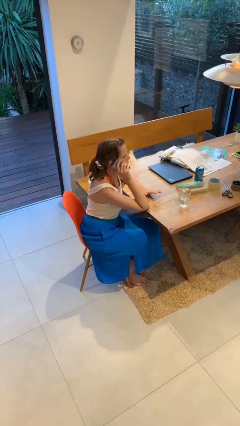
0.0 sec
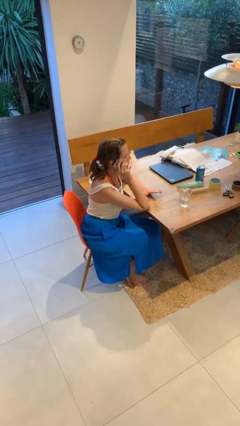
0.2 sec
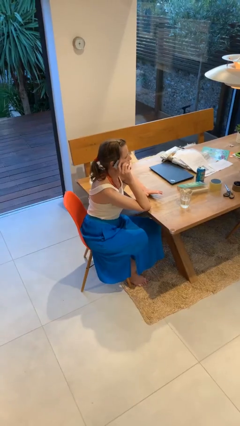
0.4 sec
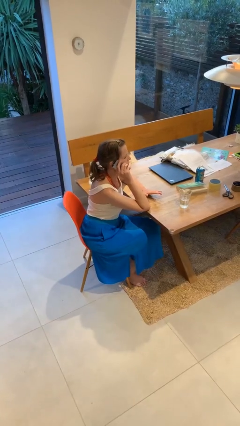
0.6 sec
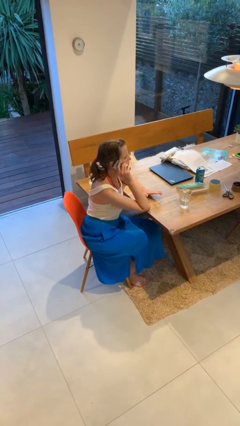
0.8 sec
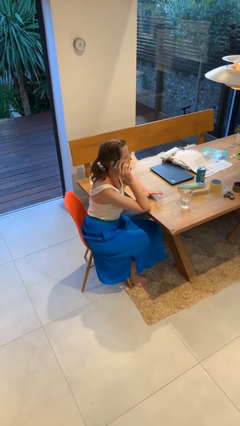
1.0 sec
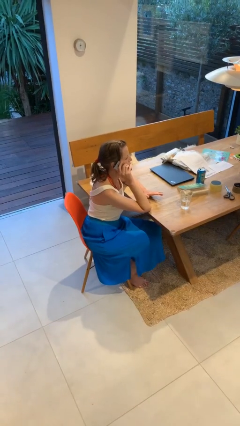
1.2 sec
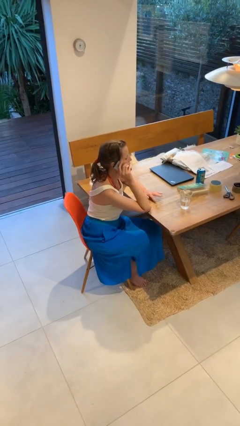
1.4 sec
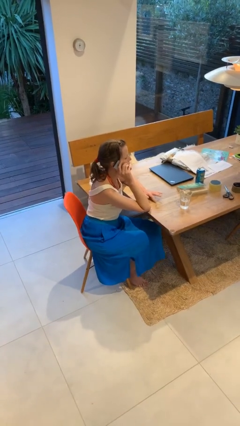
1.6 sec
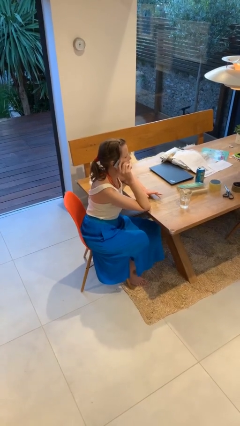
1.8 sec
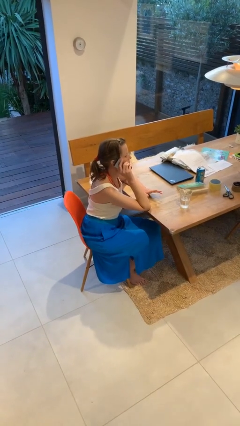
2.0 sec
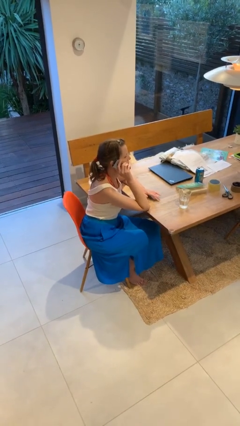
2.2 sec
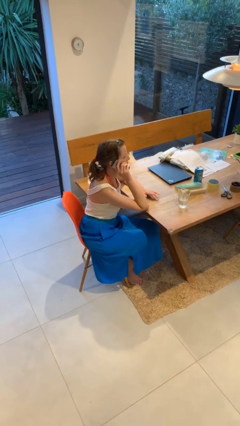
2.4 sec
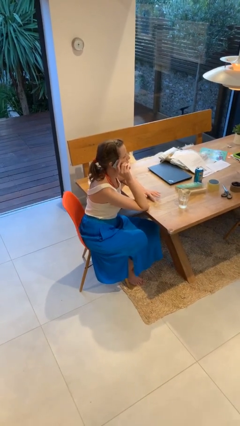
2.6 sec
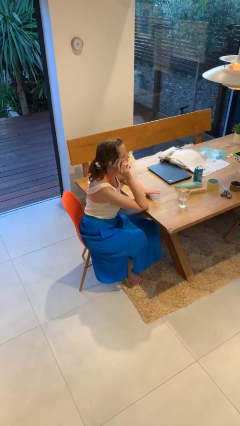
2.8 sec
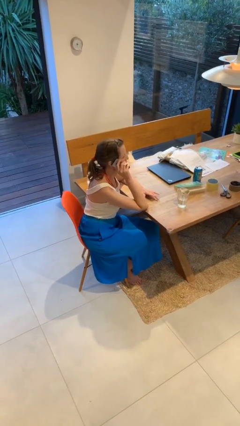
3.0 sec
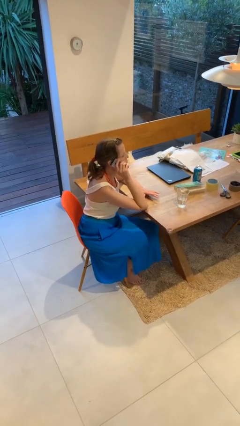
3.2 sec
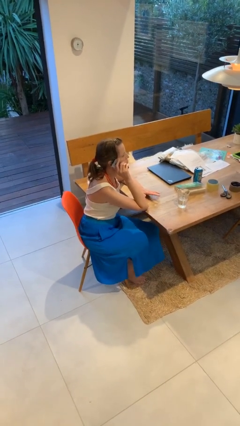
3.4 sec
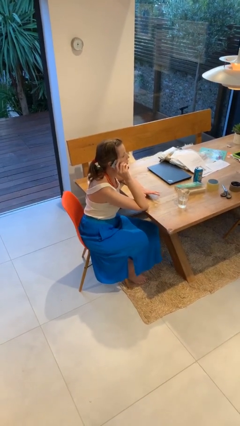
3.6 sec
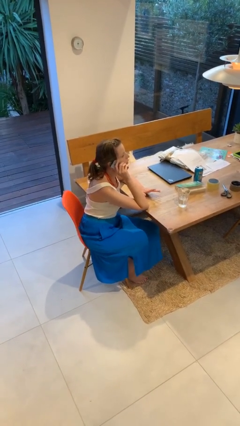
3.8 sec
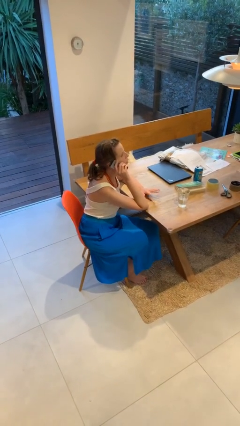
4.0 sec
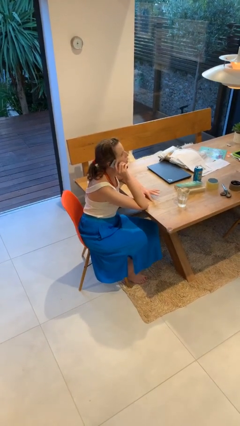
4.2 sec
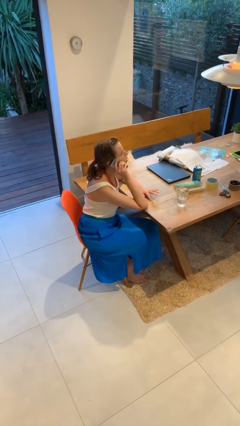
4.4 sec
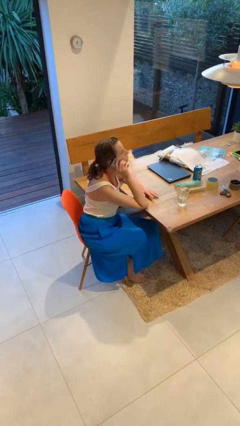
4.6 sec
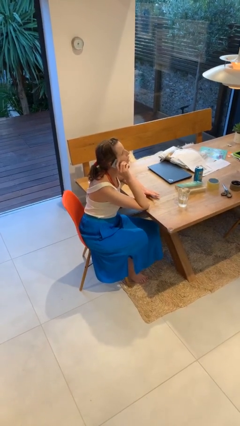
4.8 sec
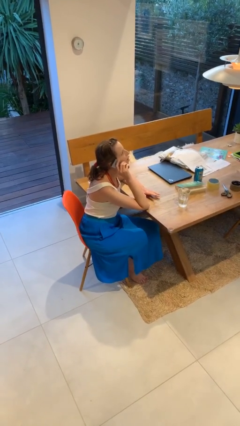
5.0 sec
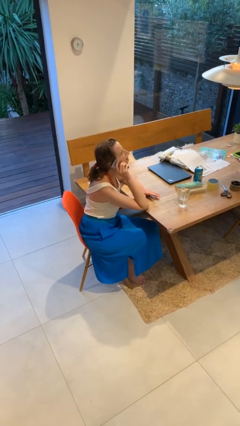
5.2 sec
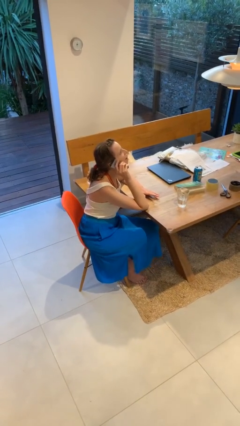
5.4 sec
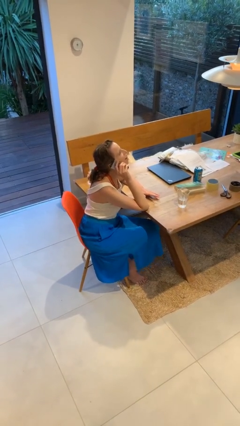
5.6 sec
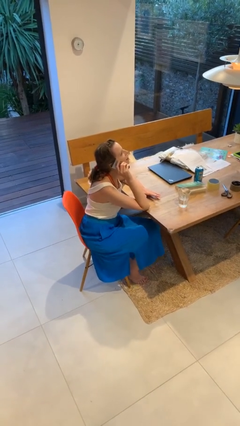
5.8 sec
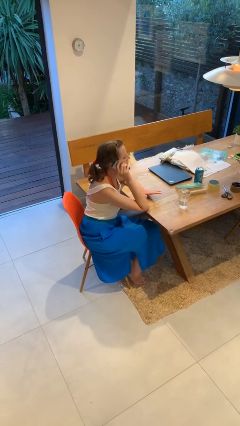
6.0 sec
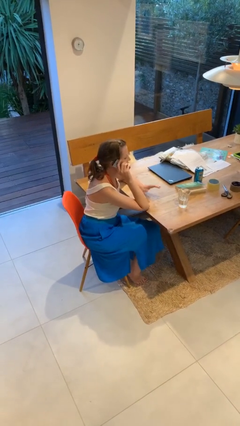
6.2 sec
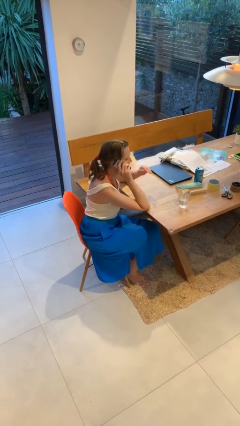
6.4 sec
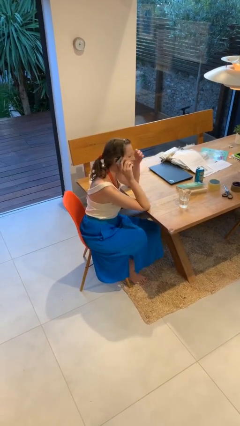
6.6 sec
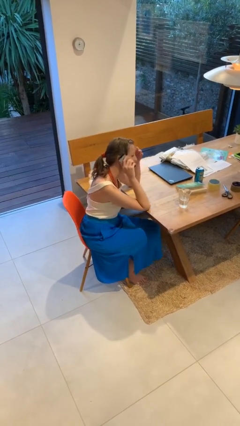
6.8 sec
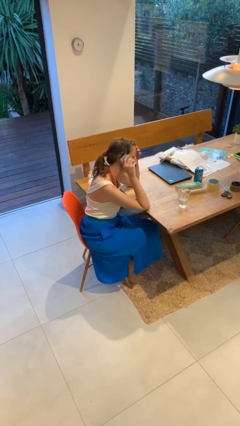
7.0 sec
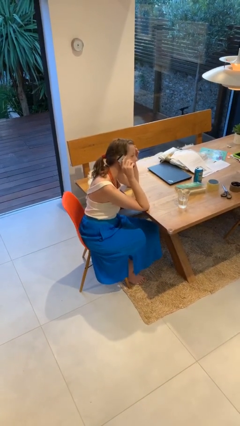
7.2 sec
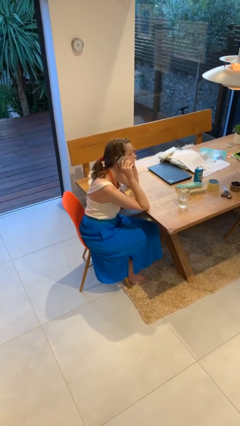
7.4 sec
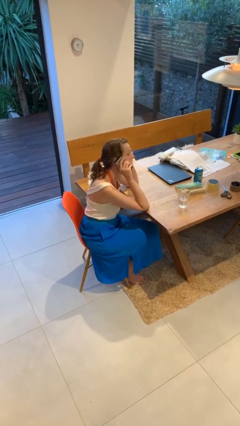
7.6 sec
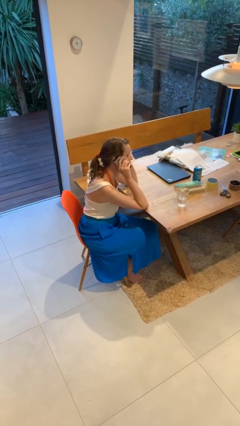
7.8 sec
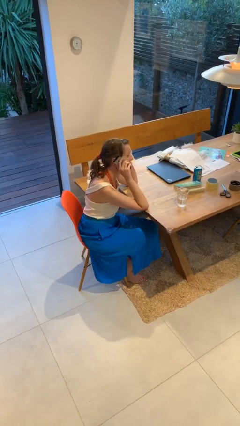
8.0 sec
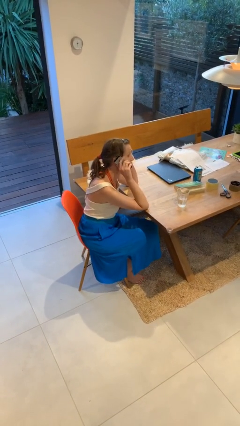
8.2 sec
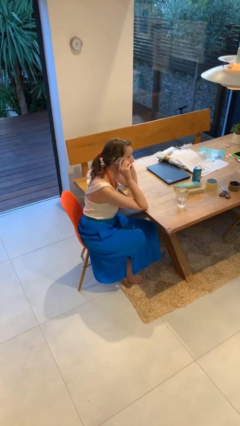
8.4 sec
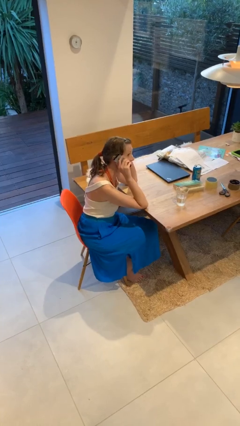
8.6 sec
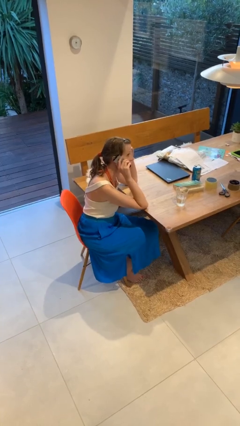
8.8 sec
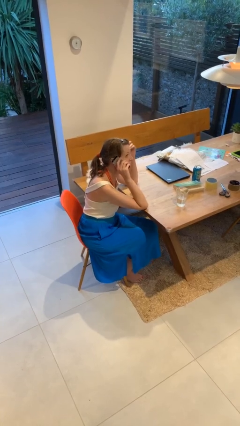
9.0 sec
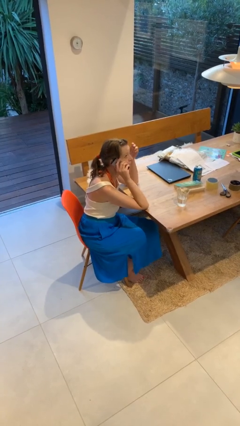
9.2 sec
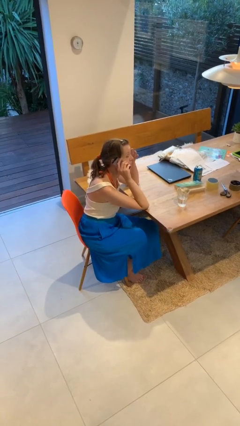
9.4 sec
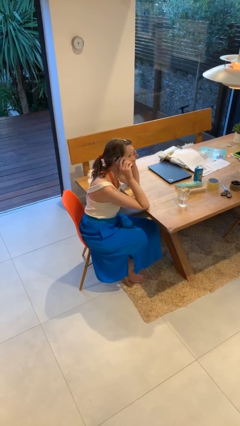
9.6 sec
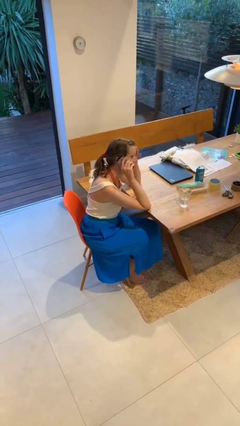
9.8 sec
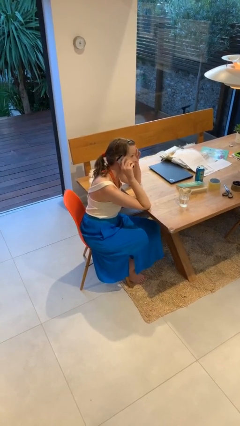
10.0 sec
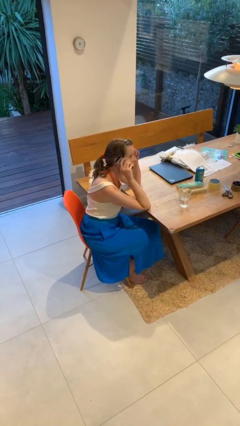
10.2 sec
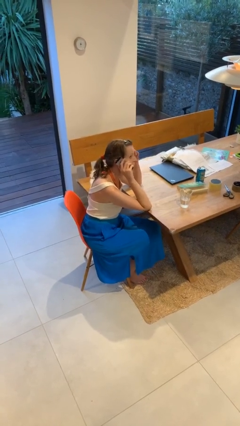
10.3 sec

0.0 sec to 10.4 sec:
person talks on phone

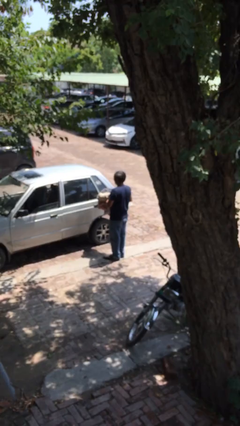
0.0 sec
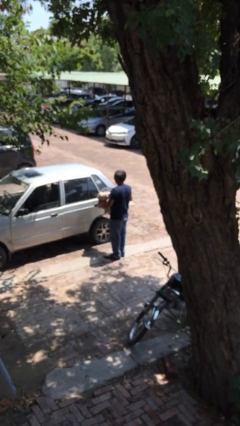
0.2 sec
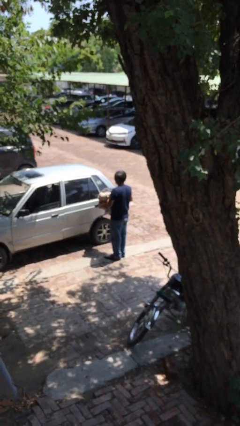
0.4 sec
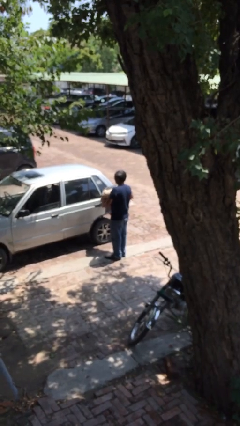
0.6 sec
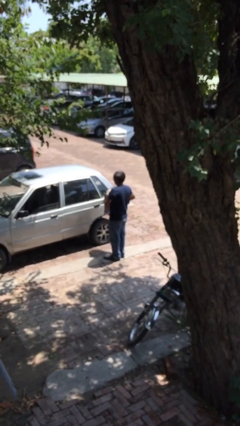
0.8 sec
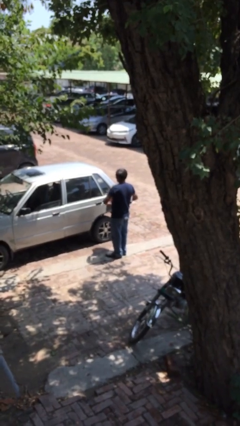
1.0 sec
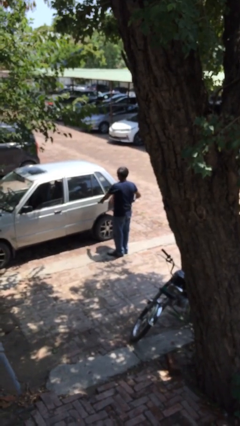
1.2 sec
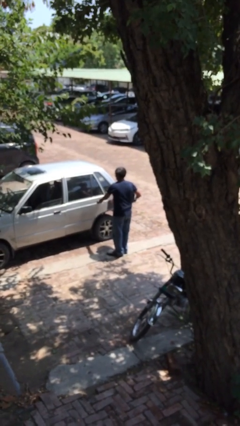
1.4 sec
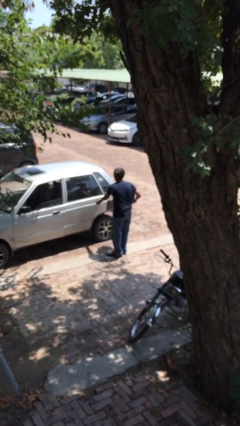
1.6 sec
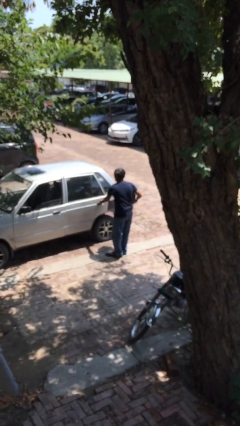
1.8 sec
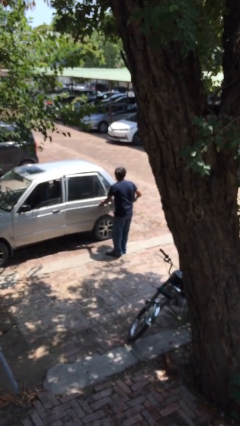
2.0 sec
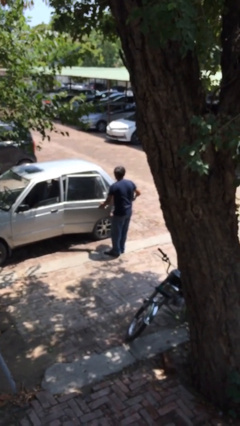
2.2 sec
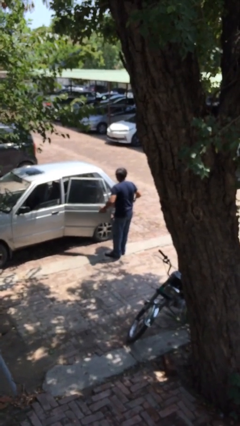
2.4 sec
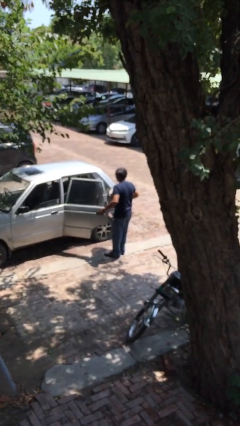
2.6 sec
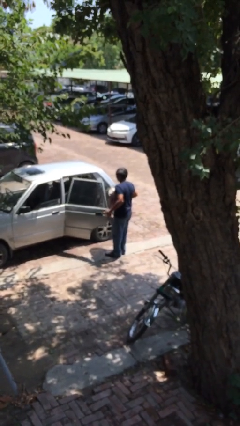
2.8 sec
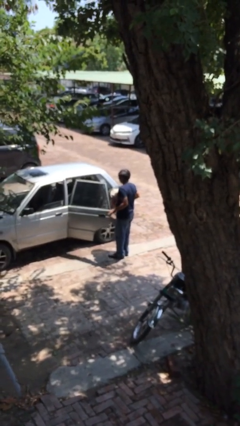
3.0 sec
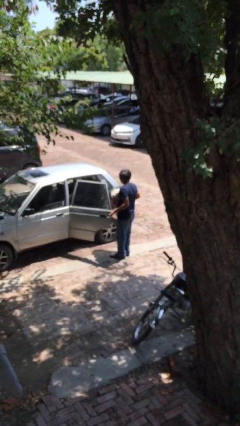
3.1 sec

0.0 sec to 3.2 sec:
person opens car door

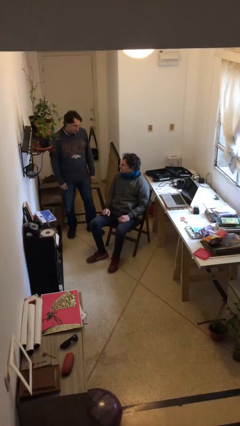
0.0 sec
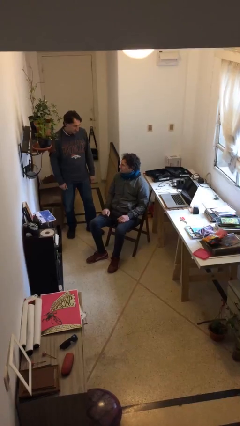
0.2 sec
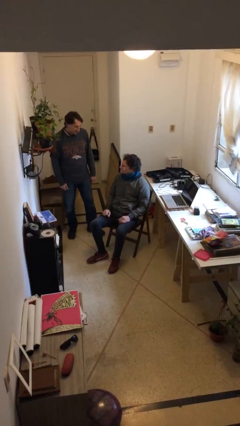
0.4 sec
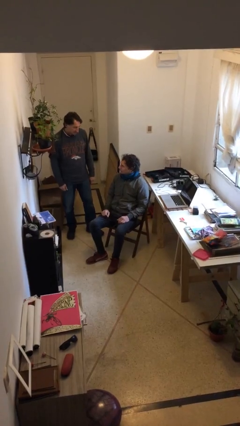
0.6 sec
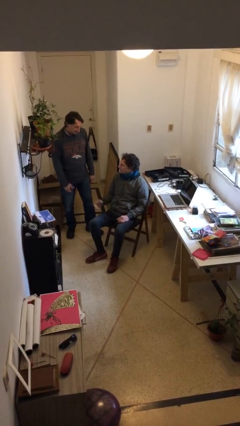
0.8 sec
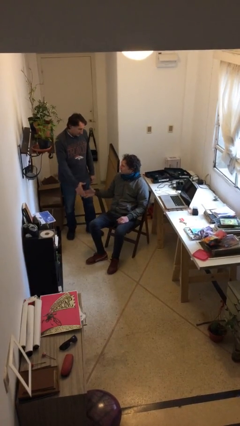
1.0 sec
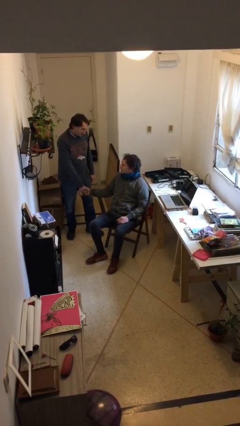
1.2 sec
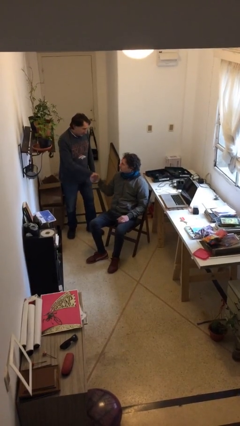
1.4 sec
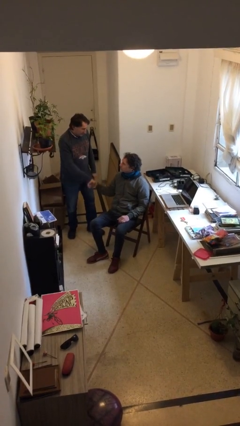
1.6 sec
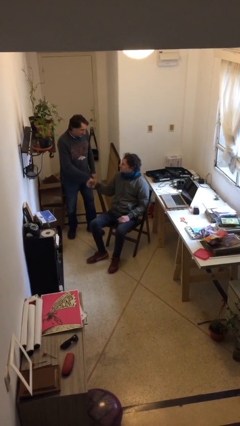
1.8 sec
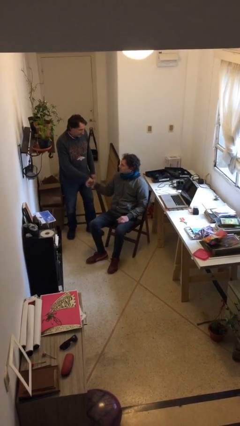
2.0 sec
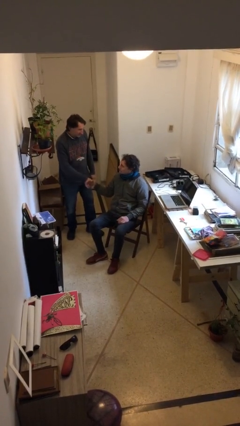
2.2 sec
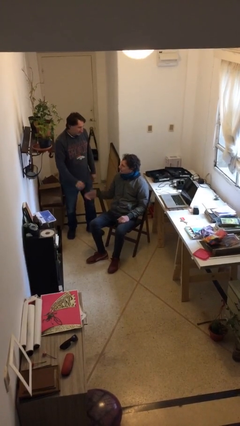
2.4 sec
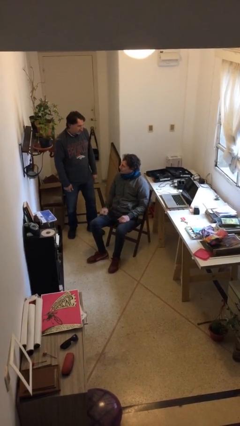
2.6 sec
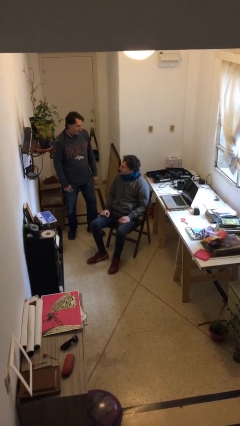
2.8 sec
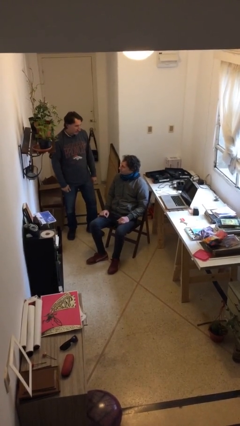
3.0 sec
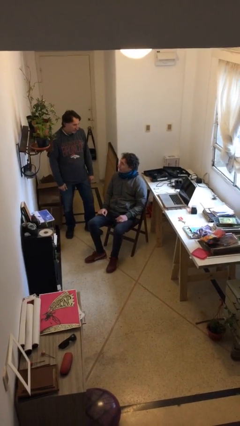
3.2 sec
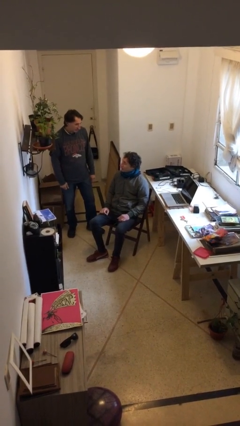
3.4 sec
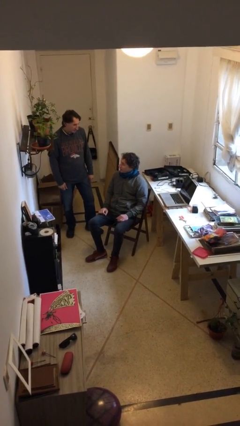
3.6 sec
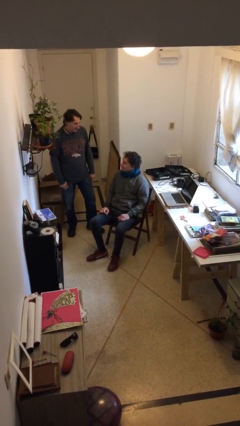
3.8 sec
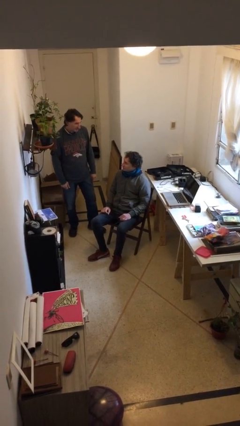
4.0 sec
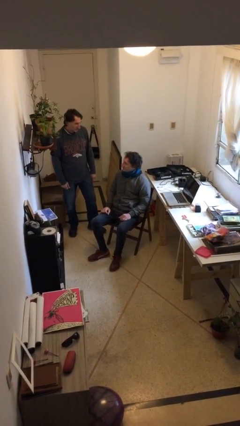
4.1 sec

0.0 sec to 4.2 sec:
person shakes hand

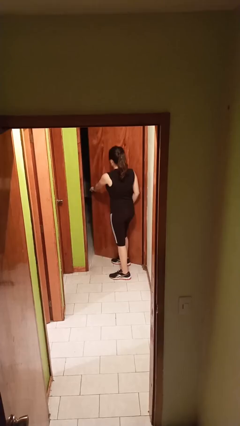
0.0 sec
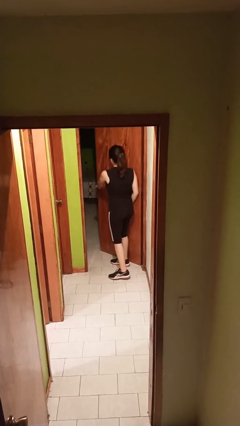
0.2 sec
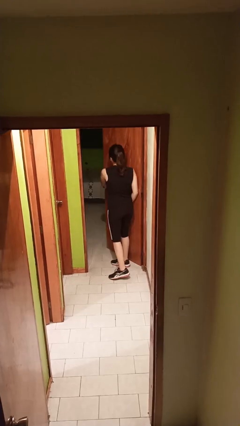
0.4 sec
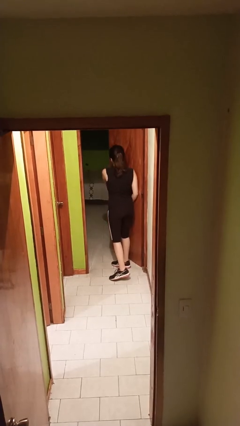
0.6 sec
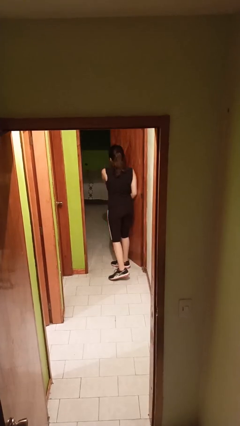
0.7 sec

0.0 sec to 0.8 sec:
person opens facility door
